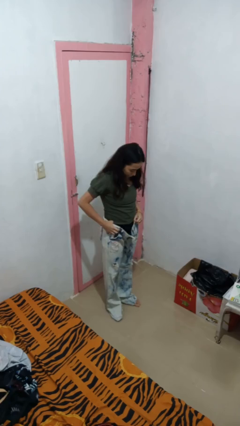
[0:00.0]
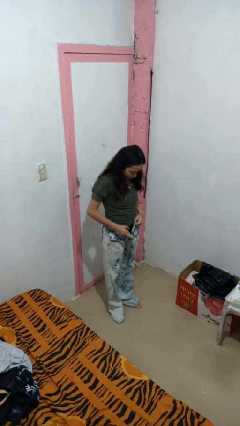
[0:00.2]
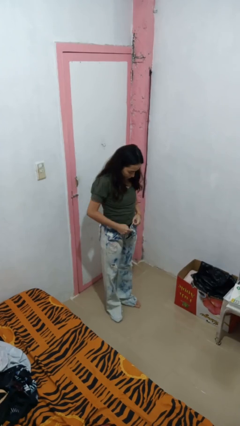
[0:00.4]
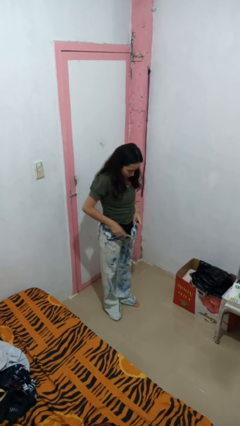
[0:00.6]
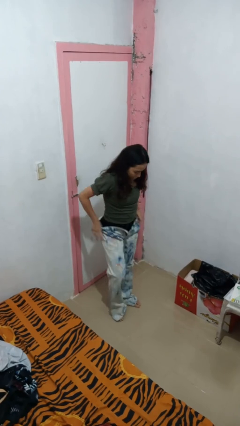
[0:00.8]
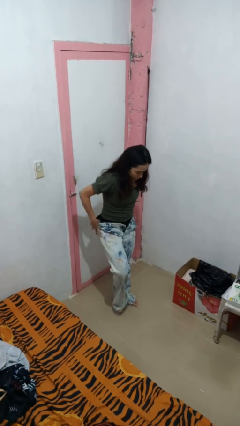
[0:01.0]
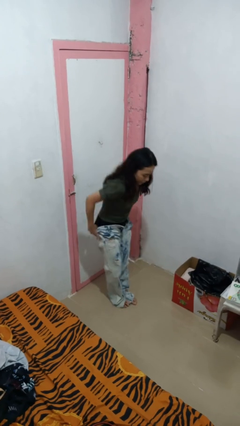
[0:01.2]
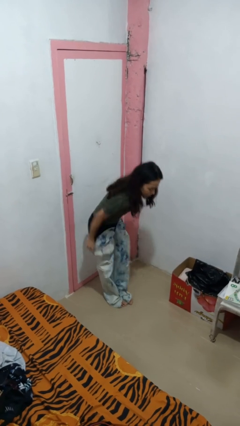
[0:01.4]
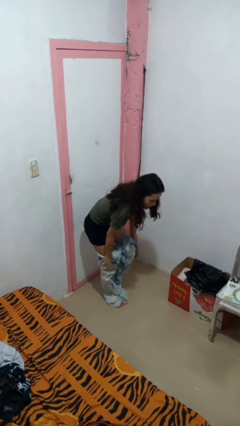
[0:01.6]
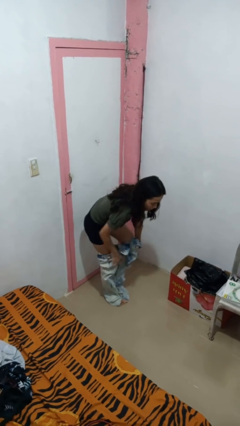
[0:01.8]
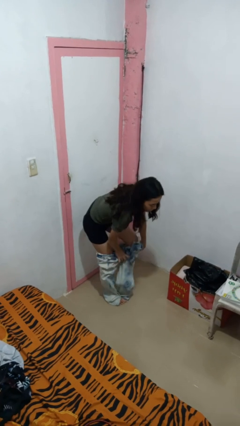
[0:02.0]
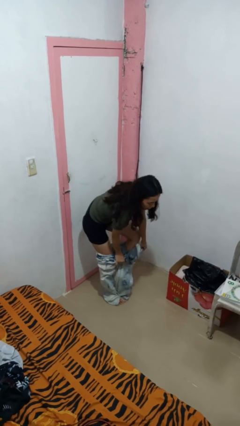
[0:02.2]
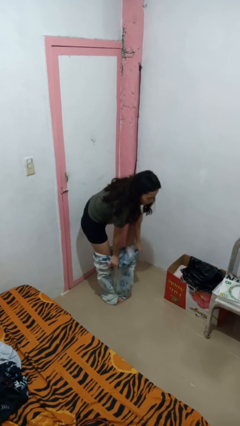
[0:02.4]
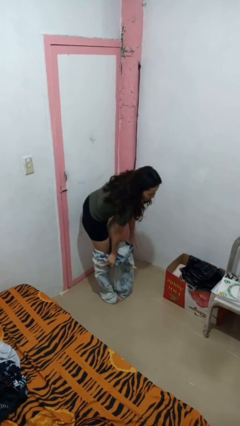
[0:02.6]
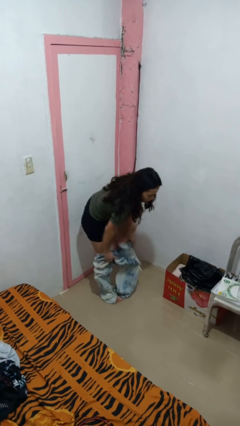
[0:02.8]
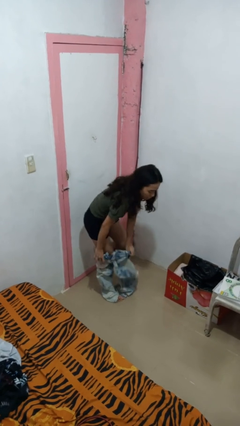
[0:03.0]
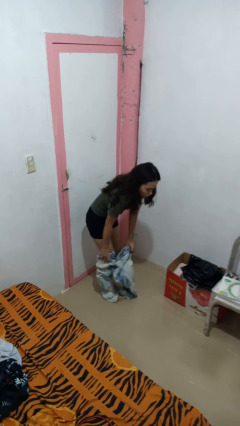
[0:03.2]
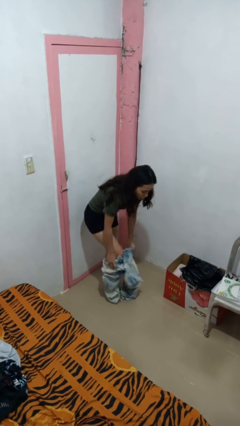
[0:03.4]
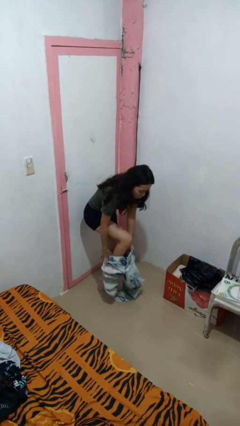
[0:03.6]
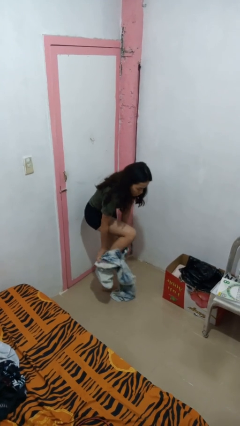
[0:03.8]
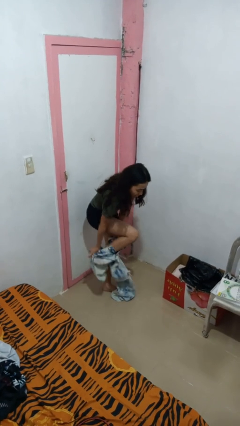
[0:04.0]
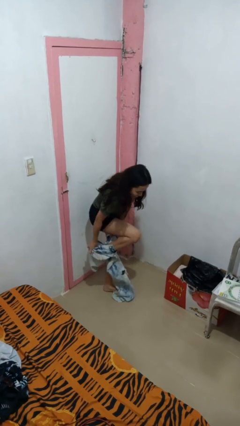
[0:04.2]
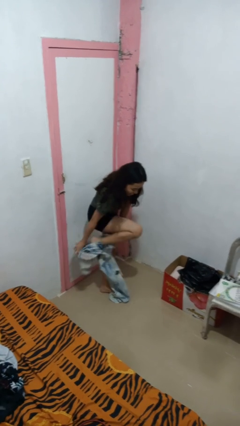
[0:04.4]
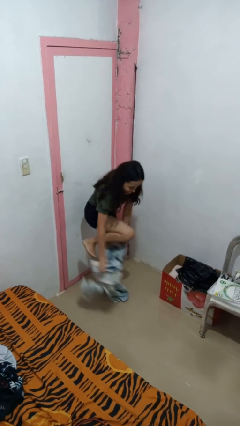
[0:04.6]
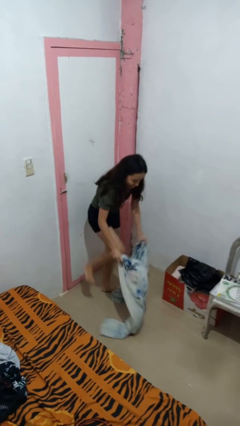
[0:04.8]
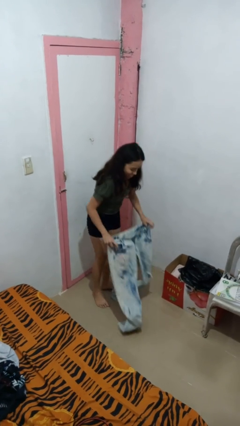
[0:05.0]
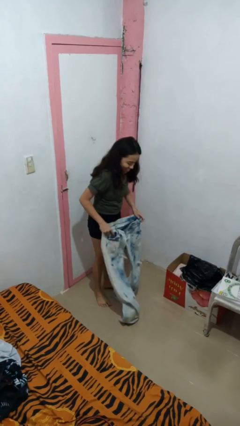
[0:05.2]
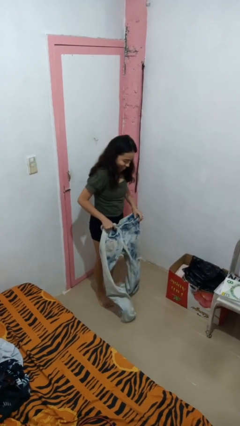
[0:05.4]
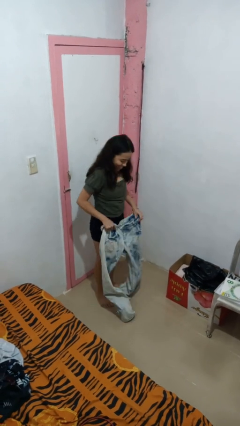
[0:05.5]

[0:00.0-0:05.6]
person takes off pants

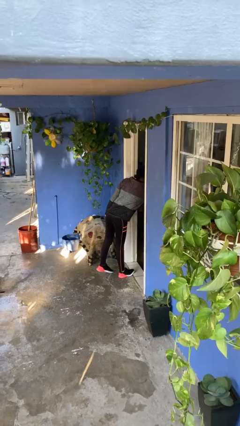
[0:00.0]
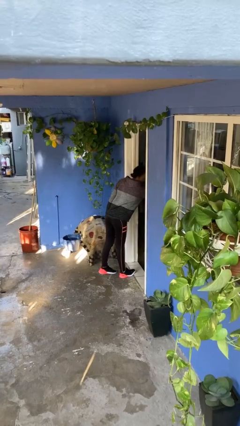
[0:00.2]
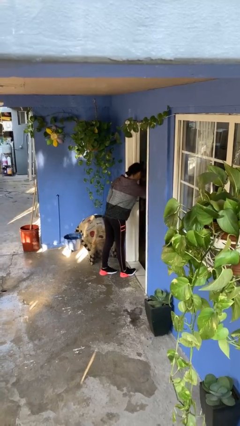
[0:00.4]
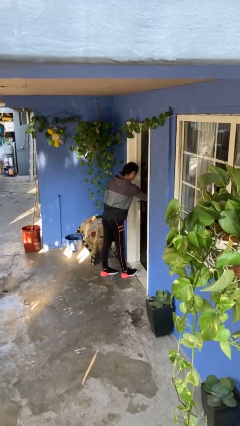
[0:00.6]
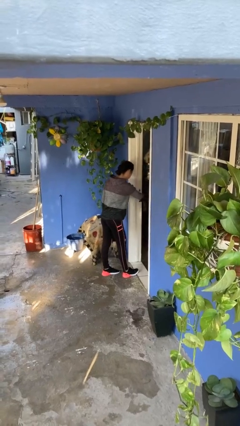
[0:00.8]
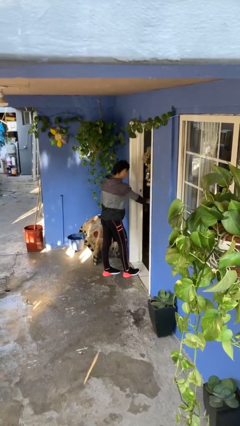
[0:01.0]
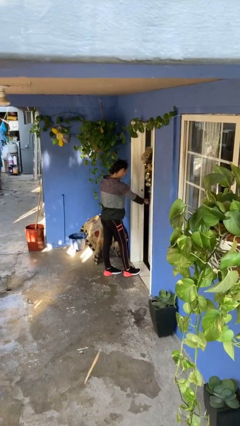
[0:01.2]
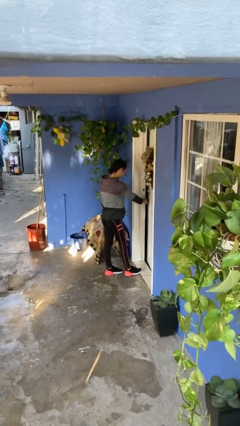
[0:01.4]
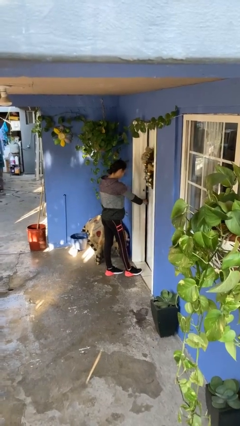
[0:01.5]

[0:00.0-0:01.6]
person closes facility door

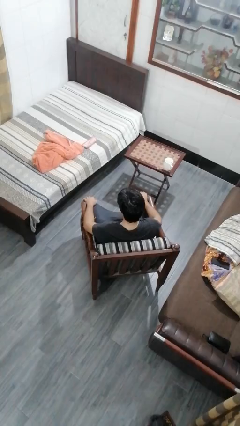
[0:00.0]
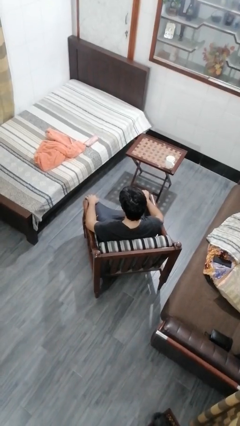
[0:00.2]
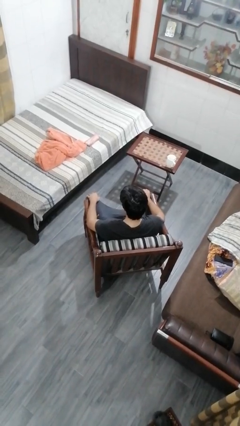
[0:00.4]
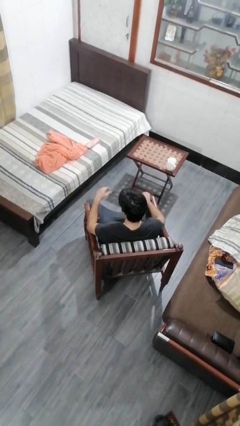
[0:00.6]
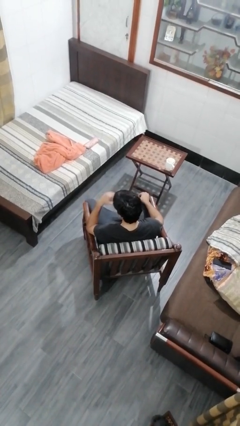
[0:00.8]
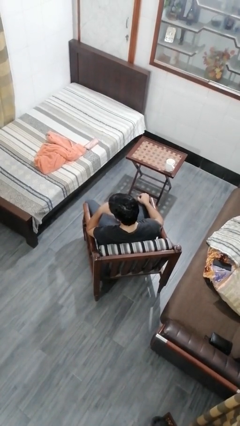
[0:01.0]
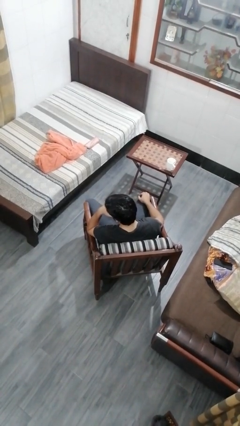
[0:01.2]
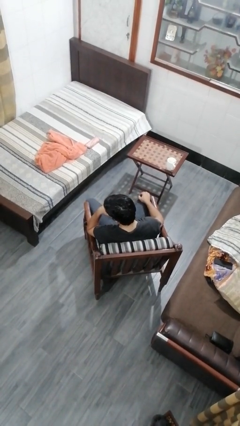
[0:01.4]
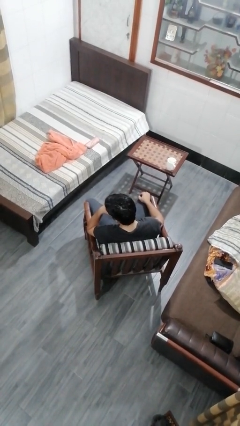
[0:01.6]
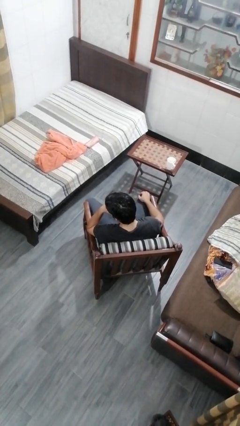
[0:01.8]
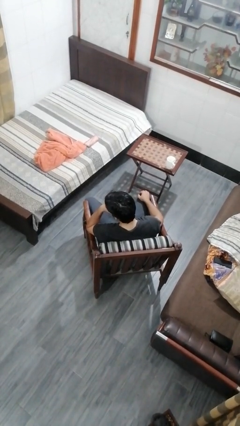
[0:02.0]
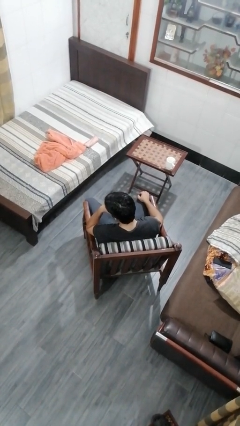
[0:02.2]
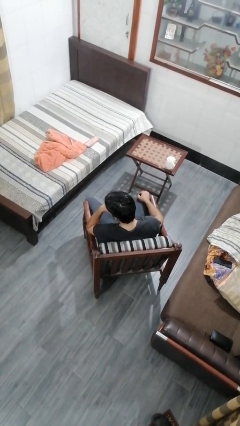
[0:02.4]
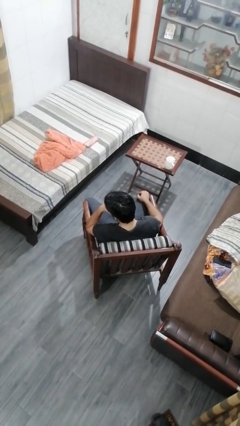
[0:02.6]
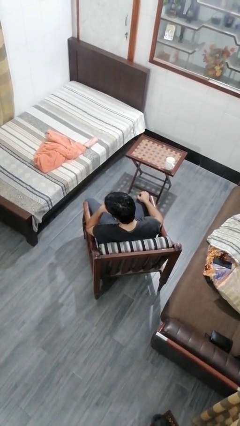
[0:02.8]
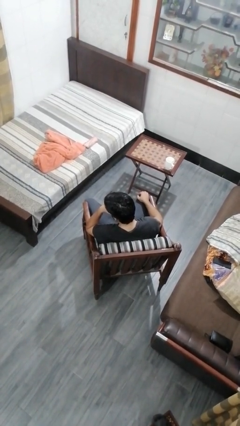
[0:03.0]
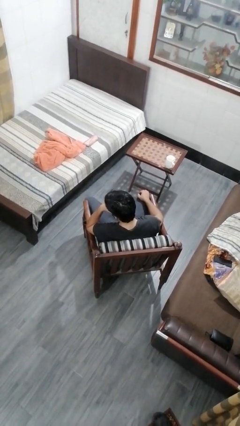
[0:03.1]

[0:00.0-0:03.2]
person strokes chin

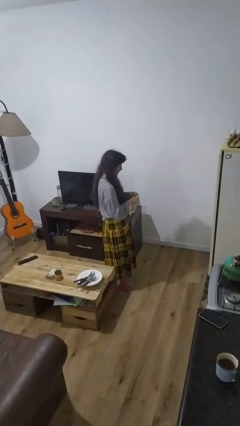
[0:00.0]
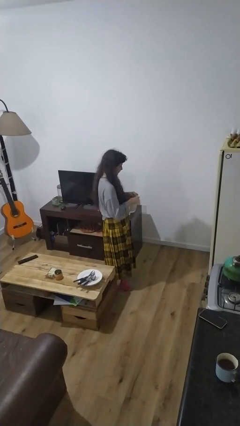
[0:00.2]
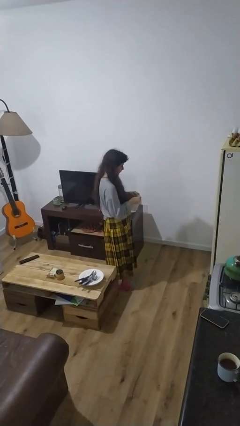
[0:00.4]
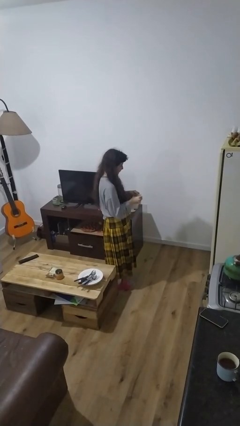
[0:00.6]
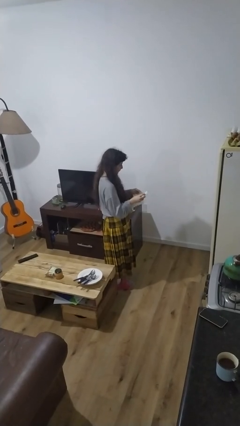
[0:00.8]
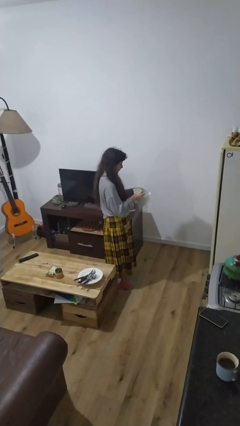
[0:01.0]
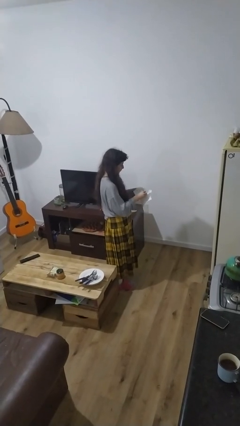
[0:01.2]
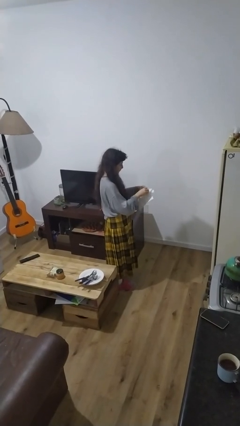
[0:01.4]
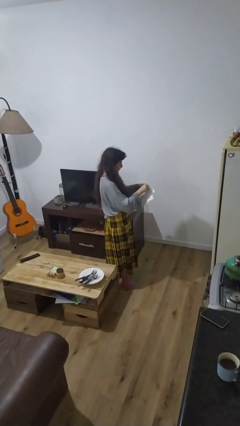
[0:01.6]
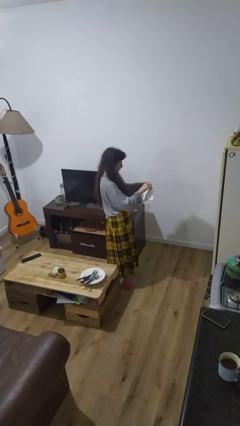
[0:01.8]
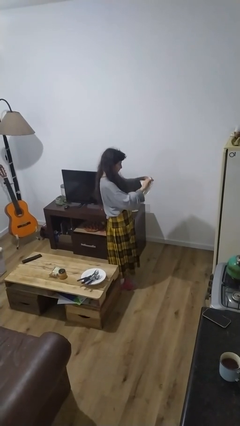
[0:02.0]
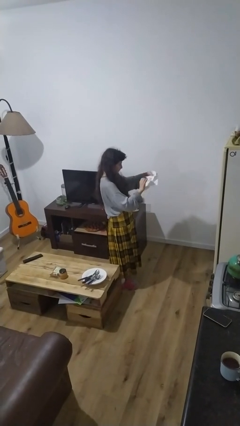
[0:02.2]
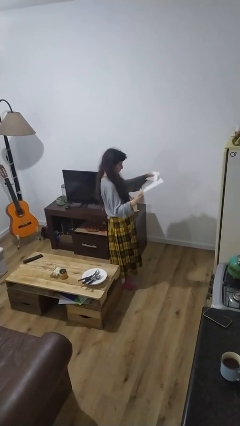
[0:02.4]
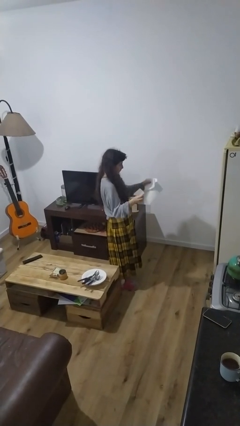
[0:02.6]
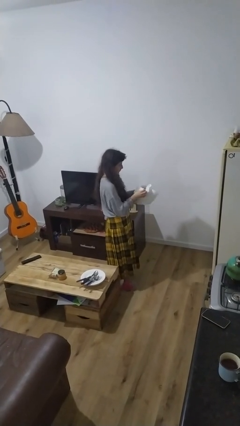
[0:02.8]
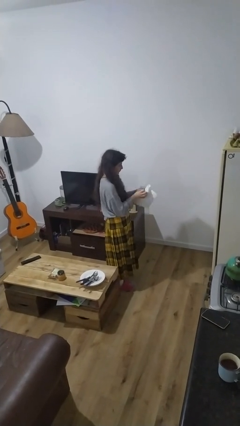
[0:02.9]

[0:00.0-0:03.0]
person tears paper

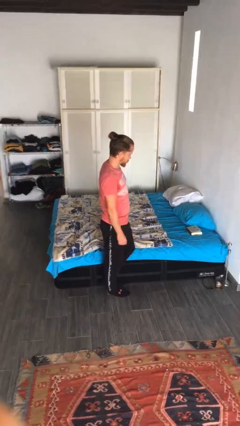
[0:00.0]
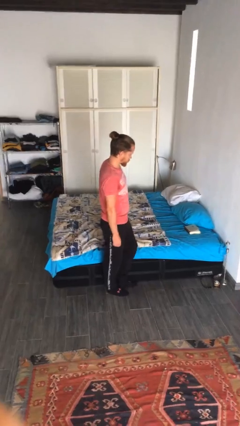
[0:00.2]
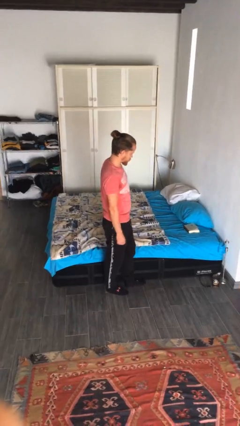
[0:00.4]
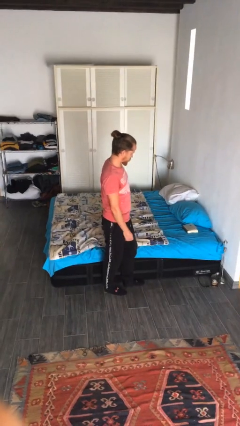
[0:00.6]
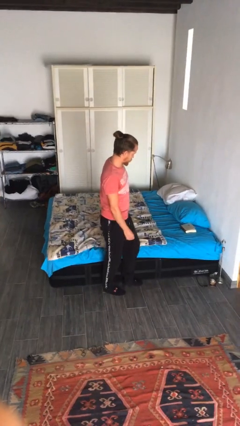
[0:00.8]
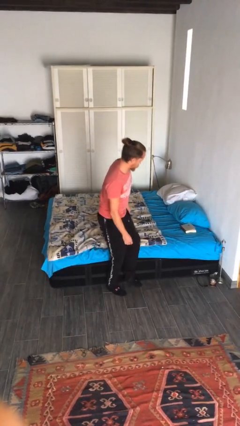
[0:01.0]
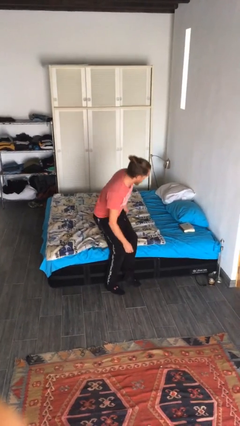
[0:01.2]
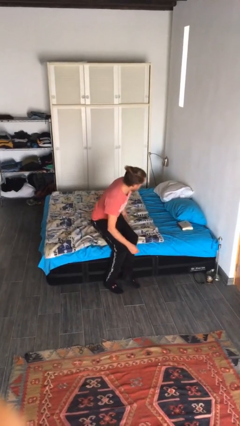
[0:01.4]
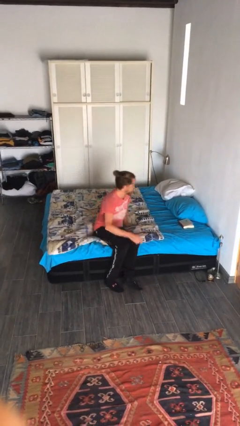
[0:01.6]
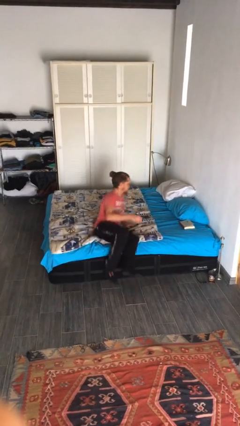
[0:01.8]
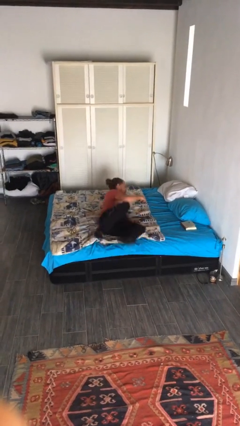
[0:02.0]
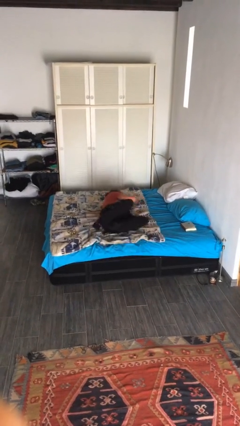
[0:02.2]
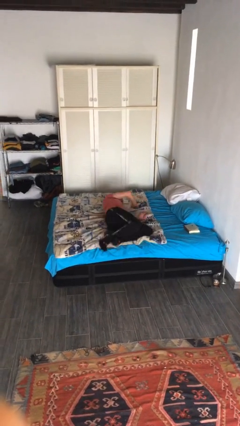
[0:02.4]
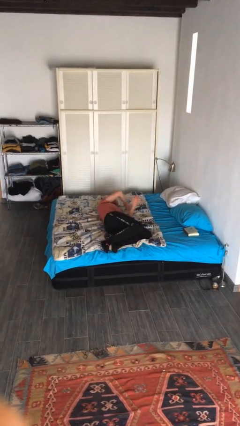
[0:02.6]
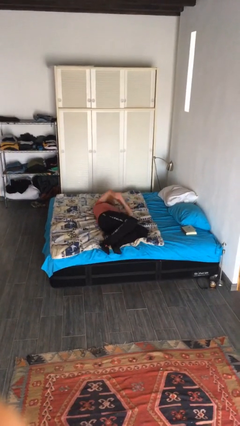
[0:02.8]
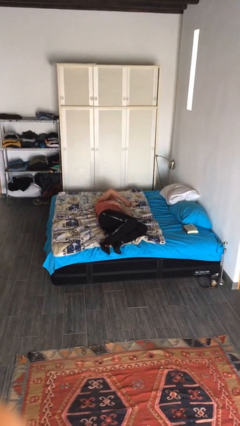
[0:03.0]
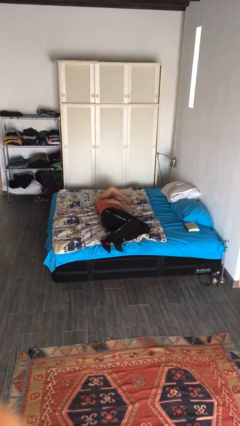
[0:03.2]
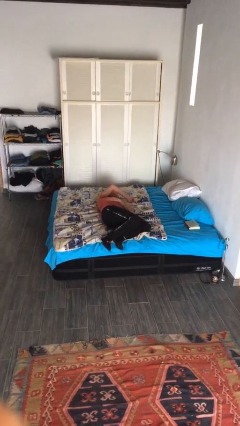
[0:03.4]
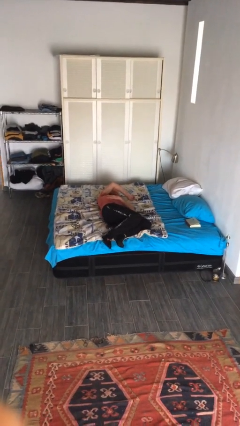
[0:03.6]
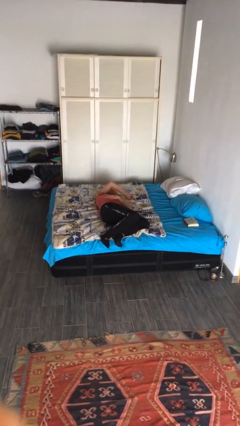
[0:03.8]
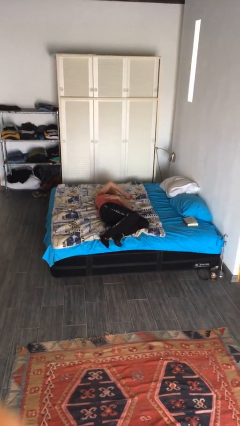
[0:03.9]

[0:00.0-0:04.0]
person lies down on bed
